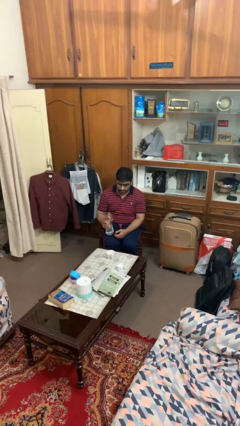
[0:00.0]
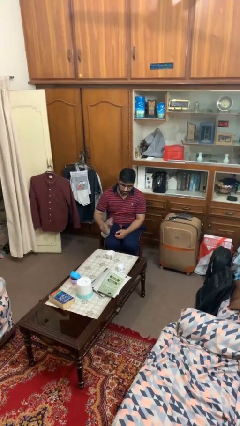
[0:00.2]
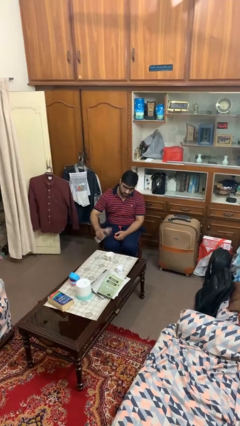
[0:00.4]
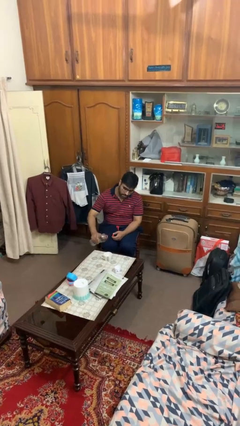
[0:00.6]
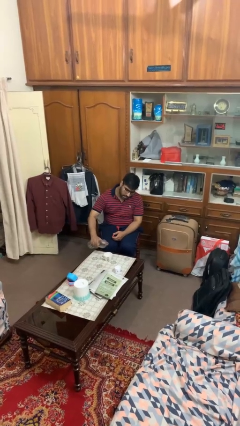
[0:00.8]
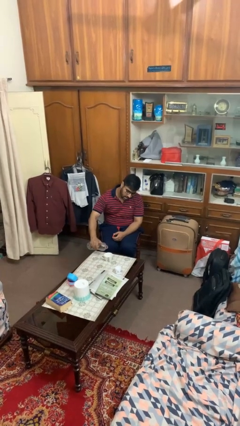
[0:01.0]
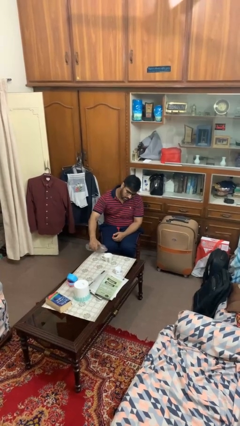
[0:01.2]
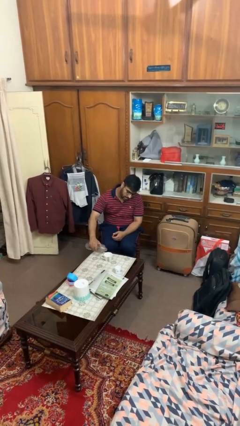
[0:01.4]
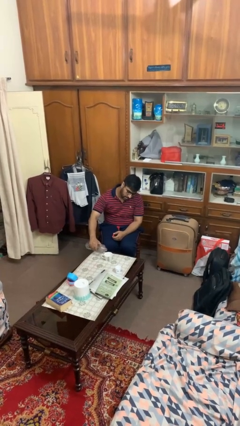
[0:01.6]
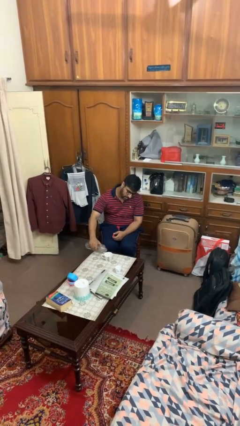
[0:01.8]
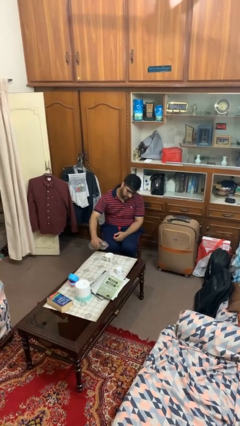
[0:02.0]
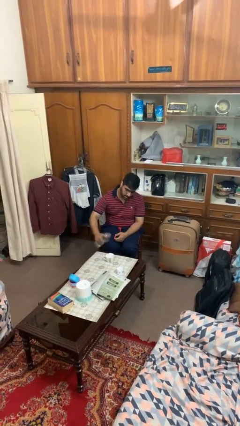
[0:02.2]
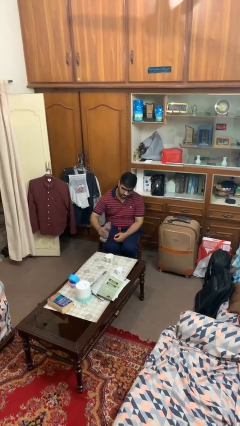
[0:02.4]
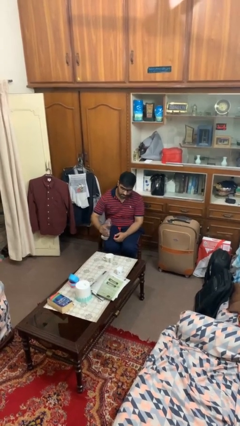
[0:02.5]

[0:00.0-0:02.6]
person pours liquid into cup

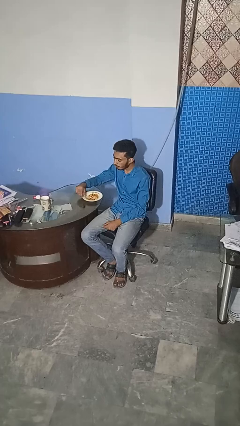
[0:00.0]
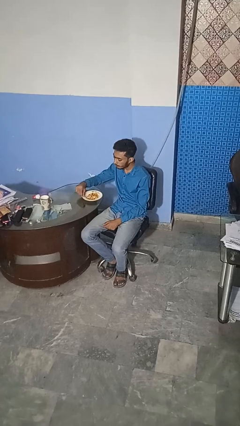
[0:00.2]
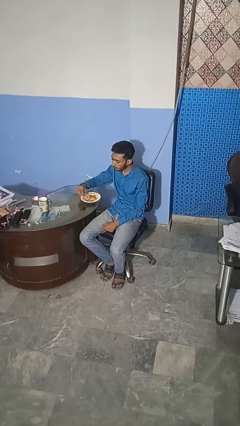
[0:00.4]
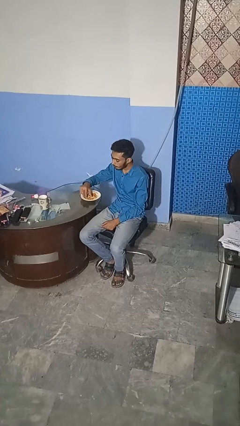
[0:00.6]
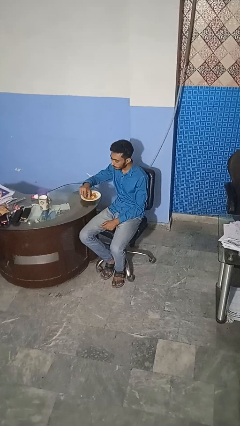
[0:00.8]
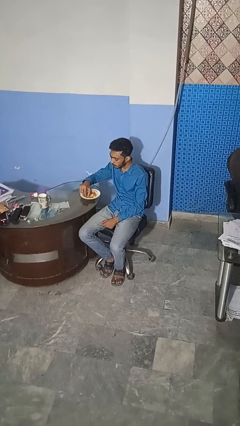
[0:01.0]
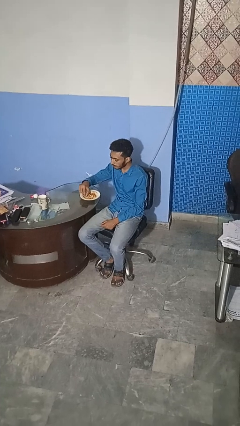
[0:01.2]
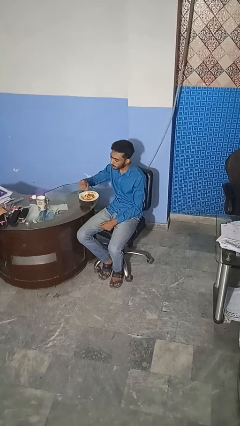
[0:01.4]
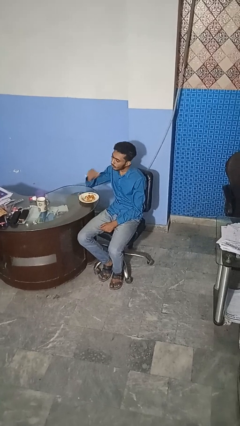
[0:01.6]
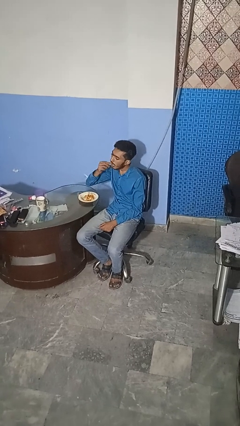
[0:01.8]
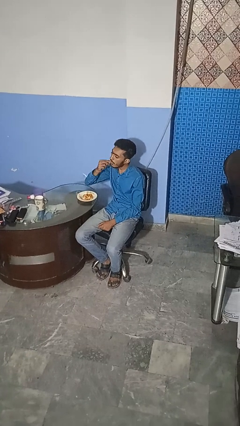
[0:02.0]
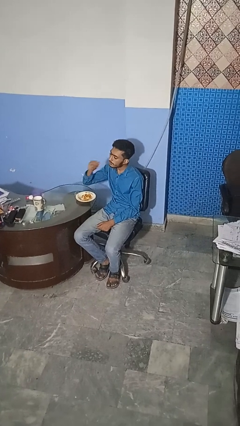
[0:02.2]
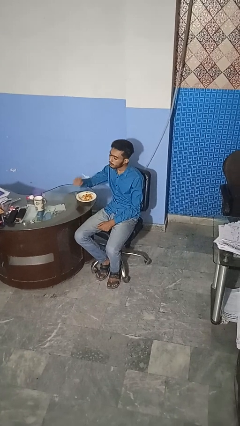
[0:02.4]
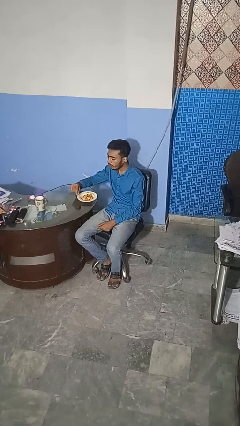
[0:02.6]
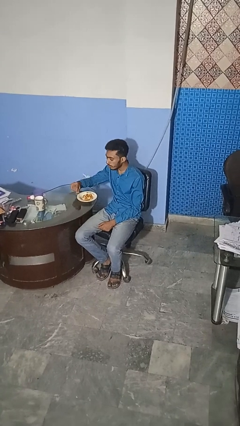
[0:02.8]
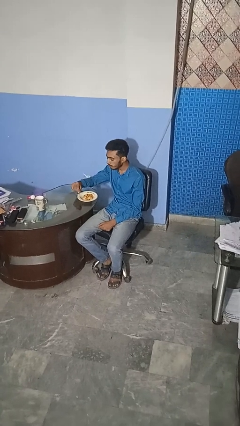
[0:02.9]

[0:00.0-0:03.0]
person eats with hands

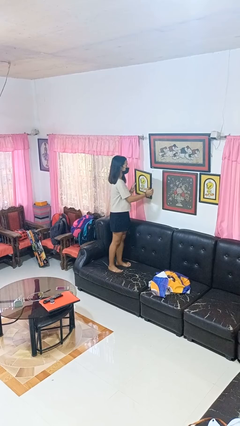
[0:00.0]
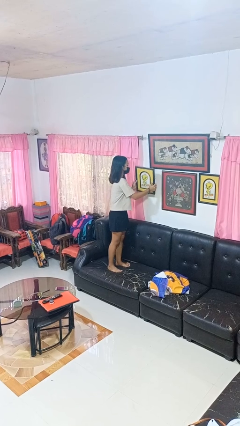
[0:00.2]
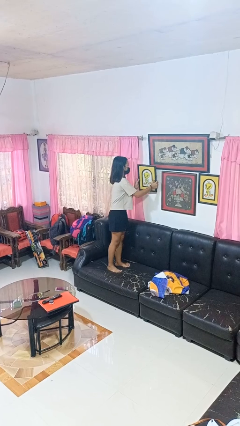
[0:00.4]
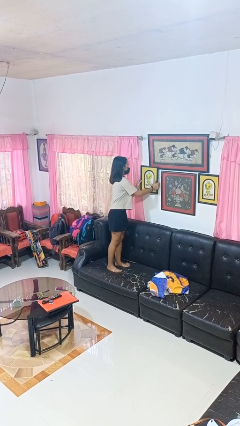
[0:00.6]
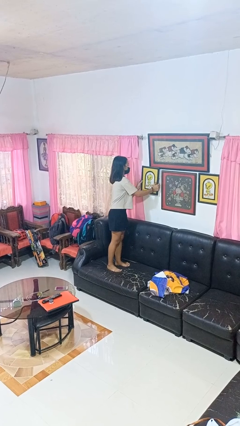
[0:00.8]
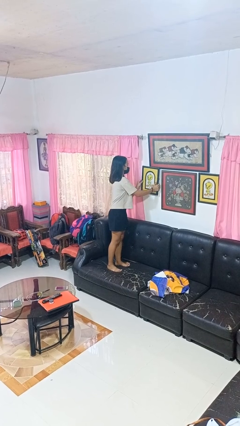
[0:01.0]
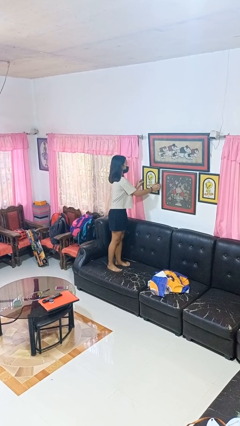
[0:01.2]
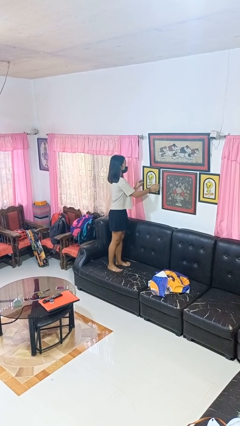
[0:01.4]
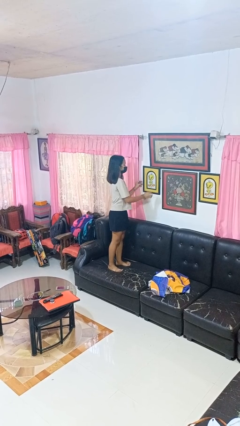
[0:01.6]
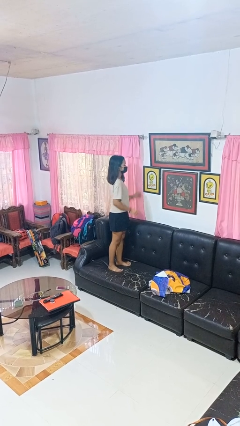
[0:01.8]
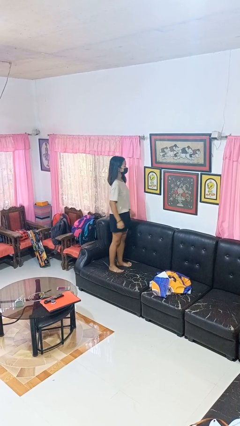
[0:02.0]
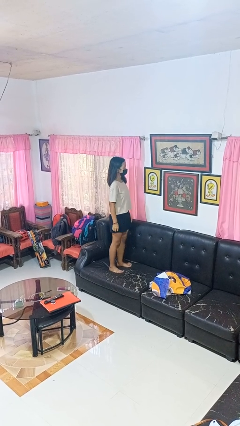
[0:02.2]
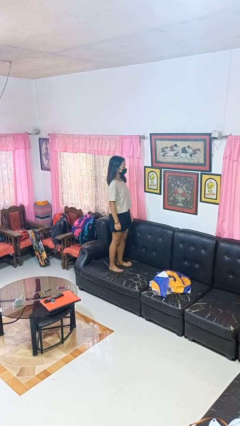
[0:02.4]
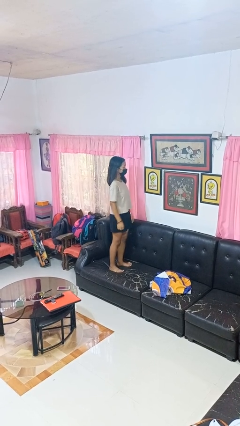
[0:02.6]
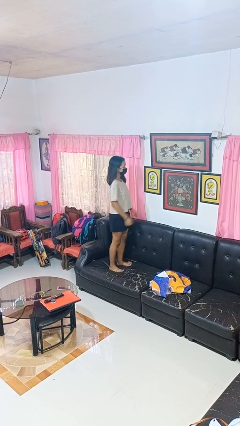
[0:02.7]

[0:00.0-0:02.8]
person puts up picture frame

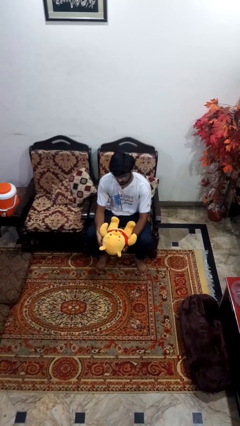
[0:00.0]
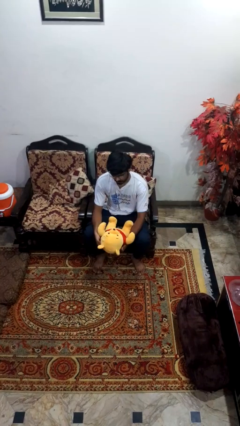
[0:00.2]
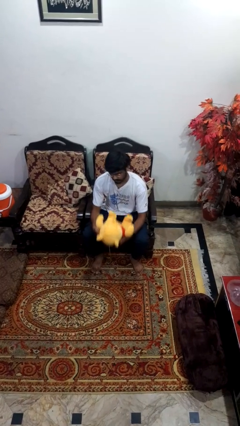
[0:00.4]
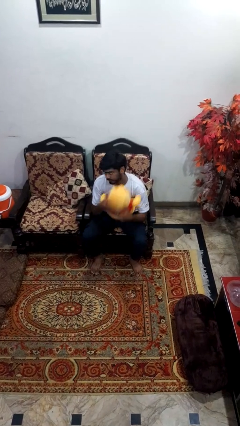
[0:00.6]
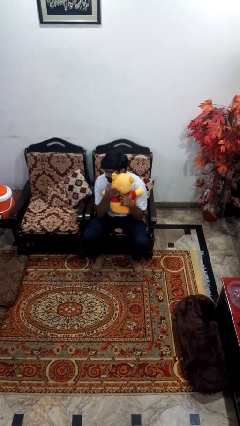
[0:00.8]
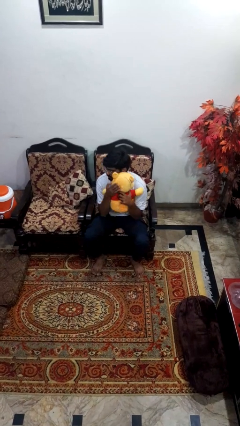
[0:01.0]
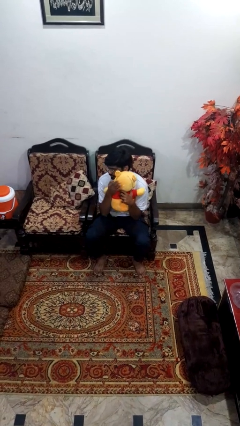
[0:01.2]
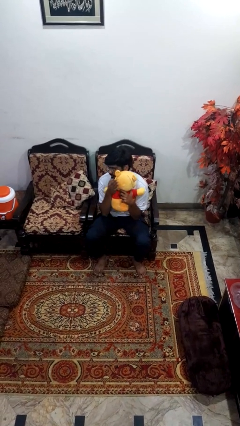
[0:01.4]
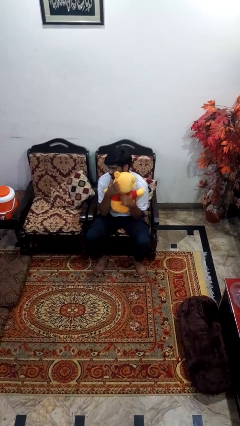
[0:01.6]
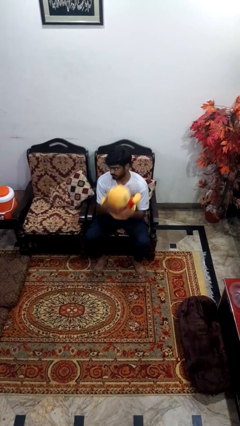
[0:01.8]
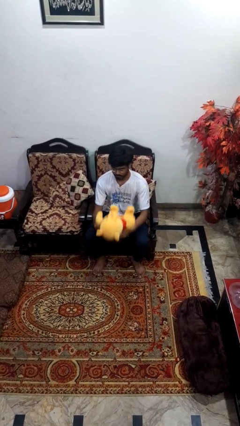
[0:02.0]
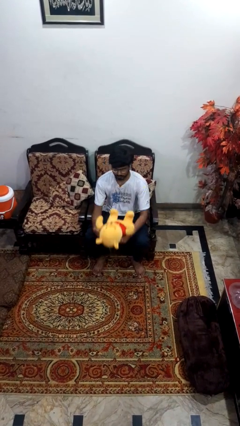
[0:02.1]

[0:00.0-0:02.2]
person hugs stuffed animal

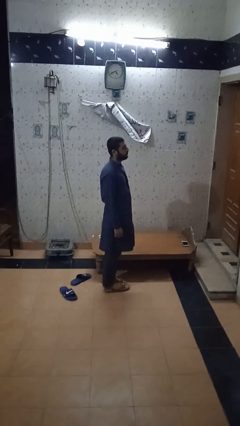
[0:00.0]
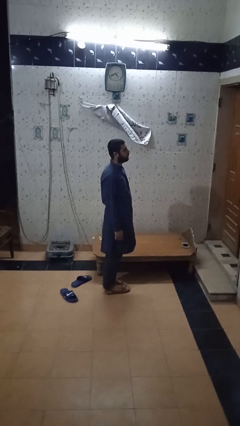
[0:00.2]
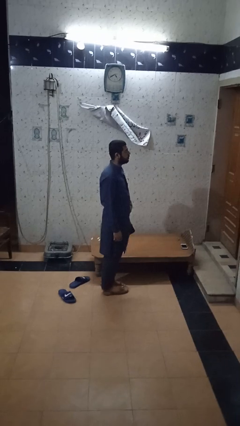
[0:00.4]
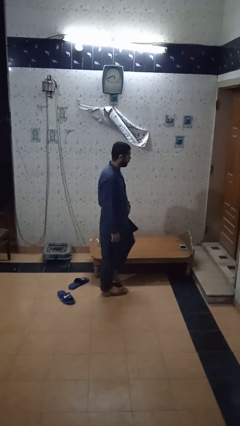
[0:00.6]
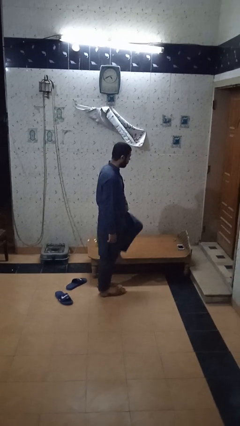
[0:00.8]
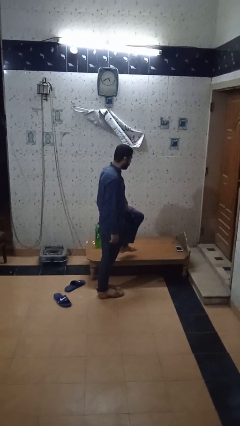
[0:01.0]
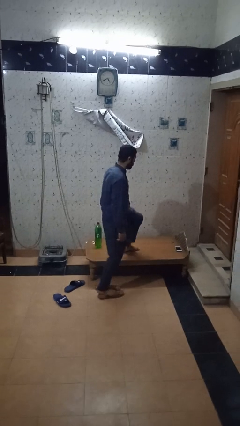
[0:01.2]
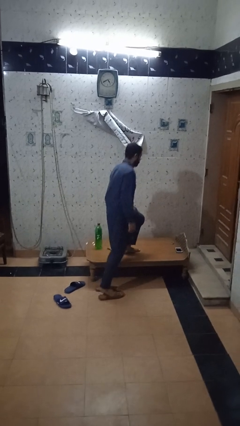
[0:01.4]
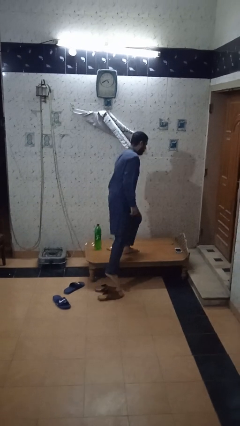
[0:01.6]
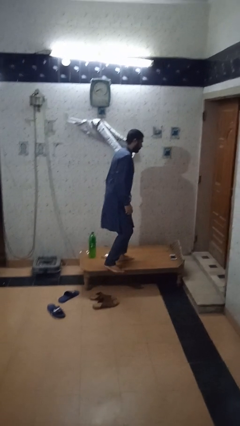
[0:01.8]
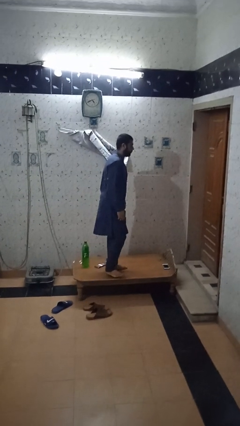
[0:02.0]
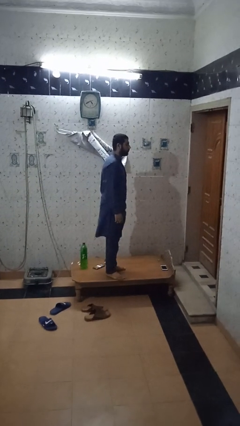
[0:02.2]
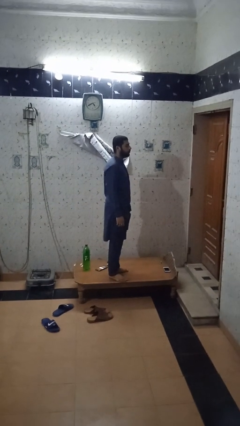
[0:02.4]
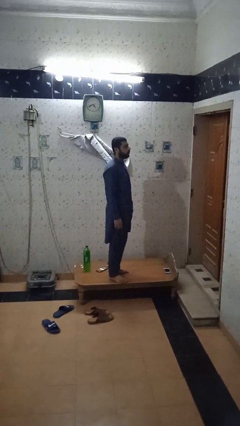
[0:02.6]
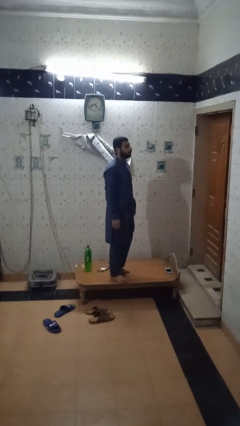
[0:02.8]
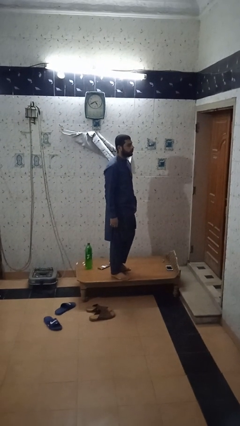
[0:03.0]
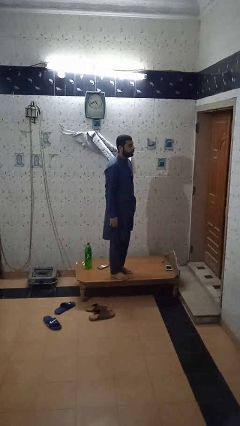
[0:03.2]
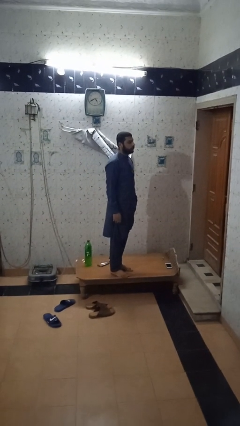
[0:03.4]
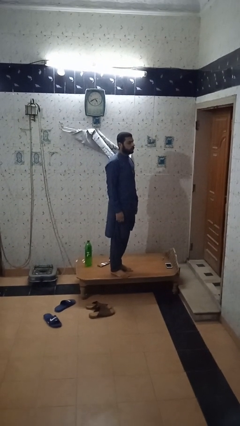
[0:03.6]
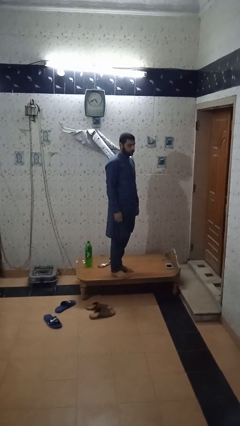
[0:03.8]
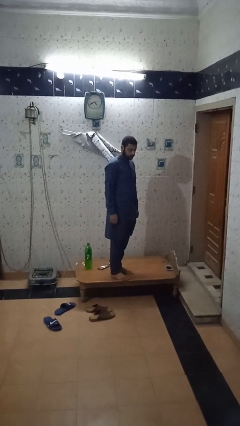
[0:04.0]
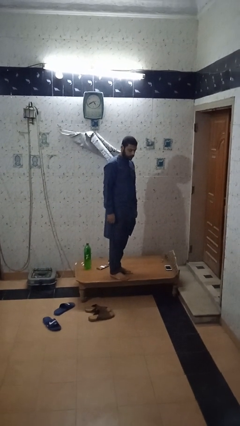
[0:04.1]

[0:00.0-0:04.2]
person climbs on table

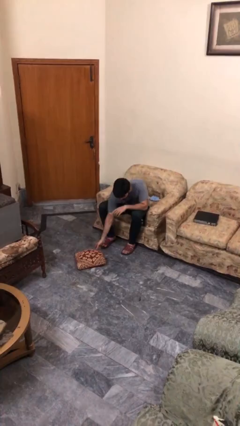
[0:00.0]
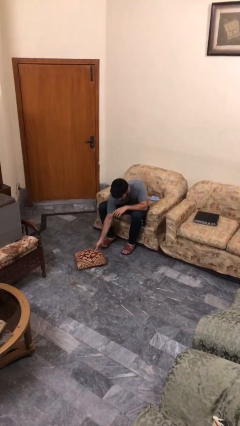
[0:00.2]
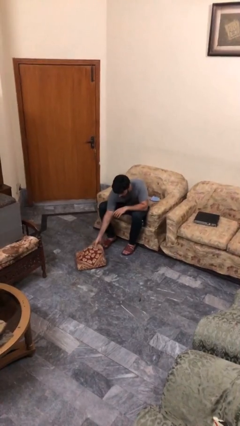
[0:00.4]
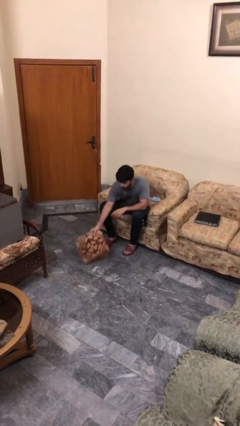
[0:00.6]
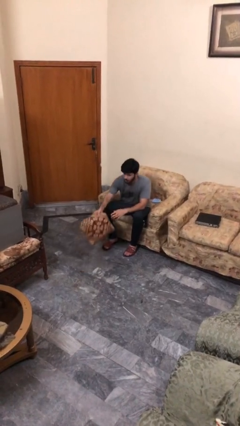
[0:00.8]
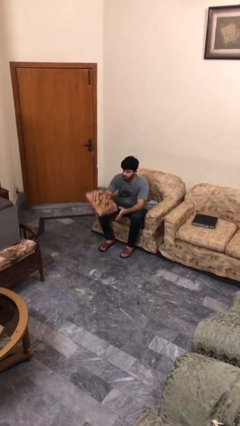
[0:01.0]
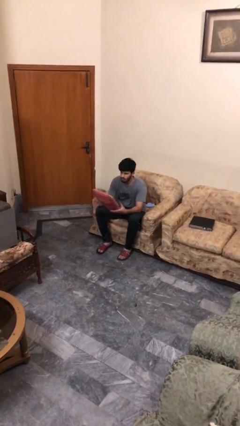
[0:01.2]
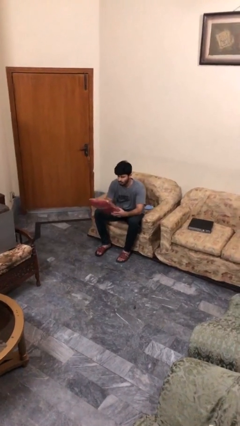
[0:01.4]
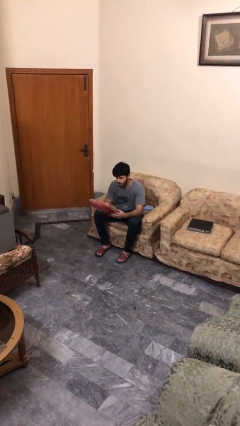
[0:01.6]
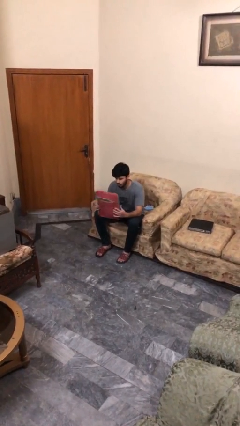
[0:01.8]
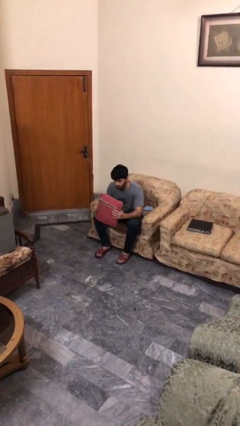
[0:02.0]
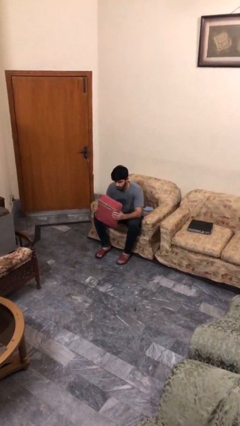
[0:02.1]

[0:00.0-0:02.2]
person picks up object from floor

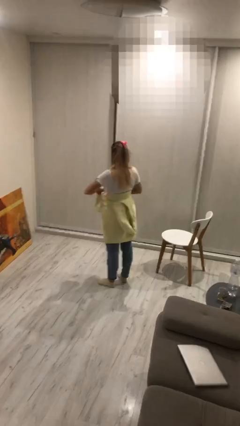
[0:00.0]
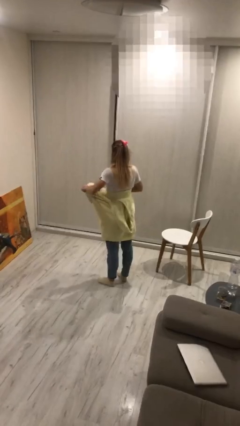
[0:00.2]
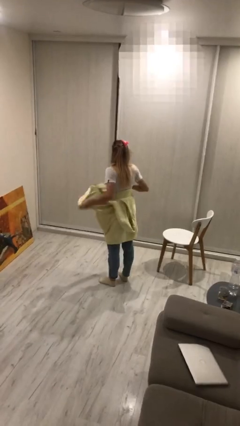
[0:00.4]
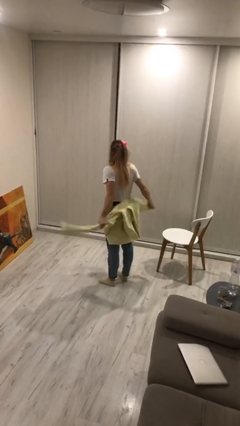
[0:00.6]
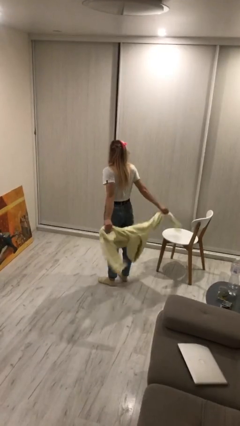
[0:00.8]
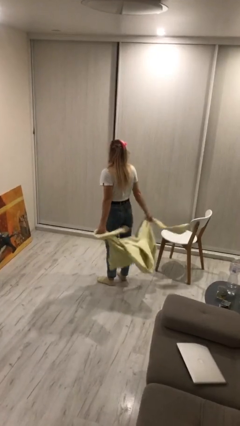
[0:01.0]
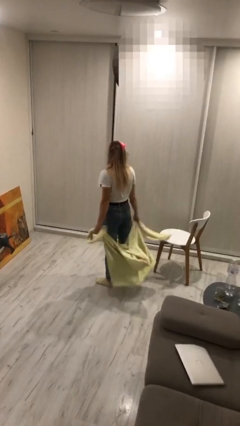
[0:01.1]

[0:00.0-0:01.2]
person unties jacket around waist
